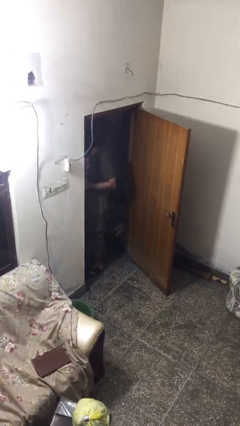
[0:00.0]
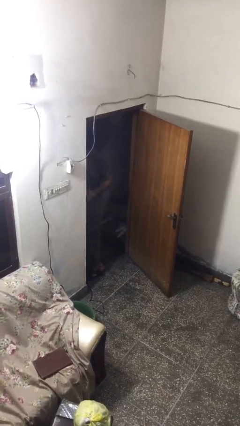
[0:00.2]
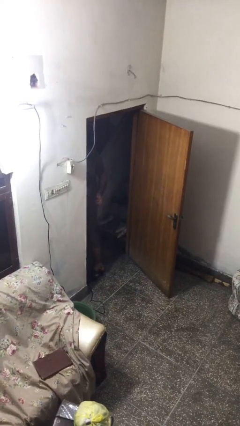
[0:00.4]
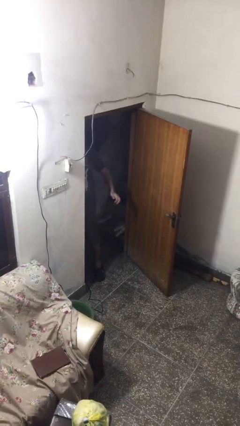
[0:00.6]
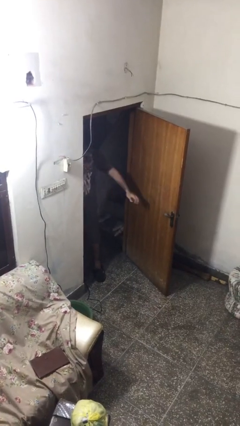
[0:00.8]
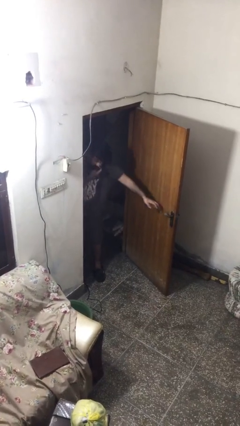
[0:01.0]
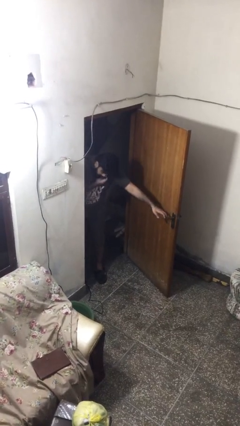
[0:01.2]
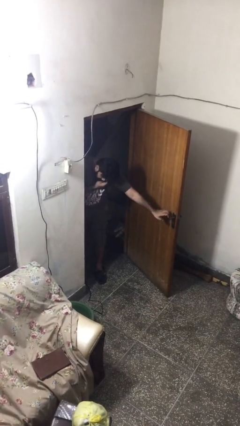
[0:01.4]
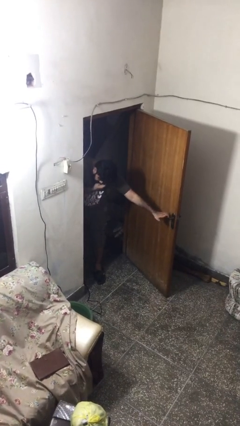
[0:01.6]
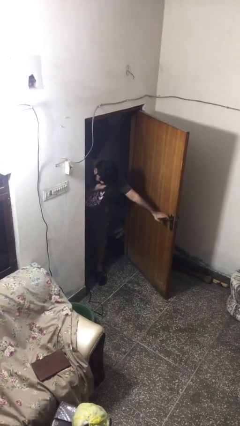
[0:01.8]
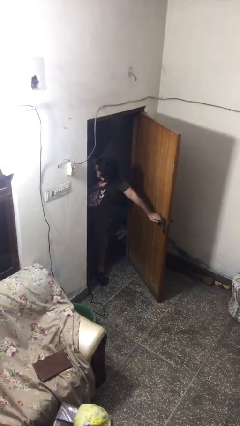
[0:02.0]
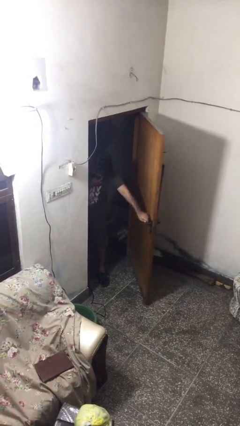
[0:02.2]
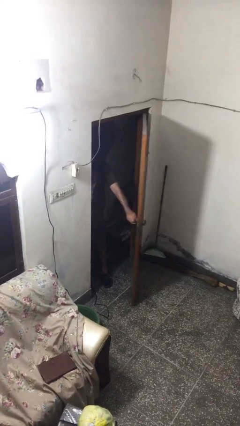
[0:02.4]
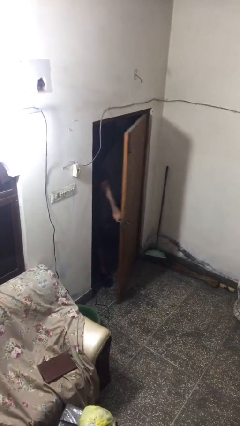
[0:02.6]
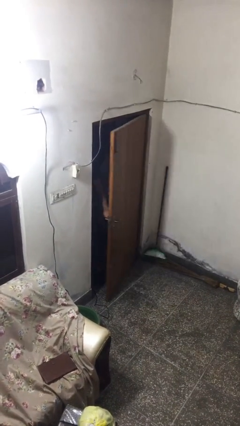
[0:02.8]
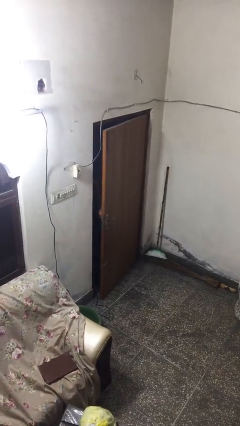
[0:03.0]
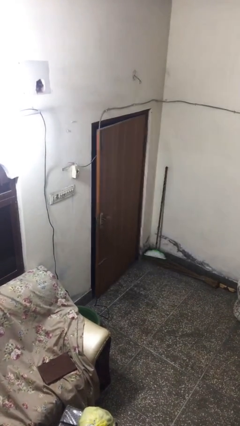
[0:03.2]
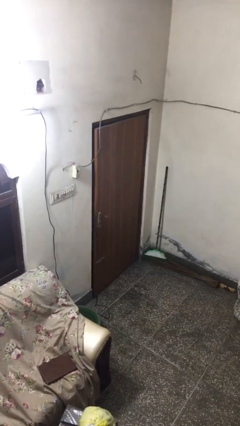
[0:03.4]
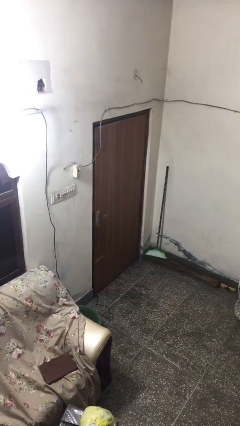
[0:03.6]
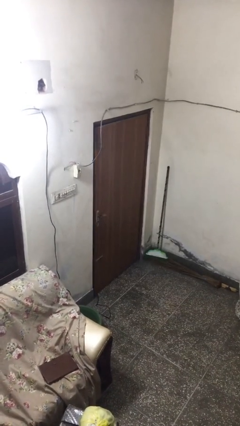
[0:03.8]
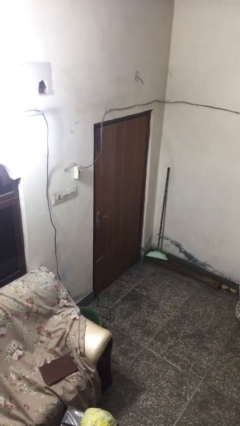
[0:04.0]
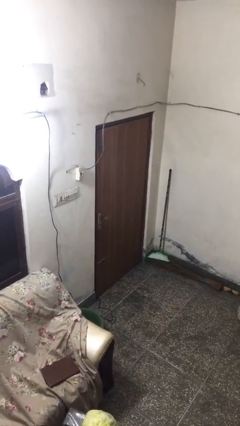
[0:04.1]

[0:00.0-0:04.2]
person closes facility door

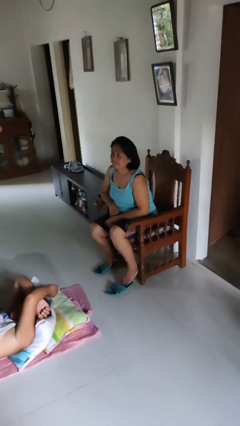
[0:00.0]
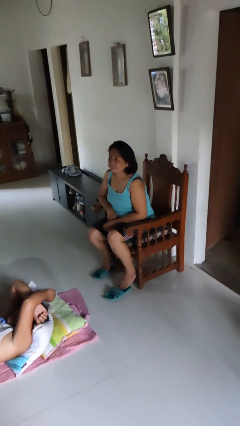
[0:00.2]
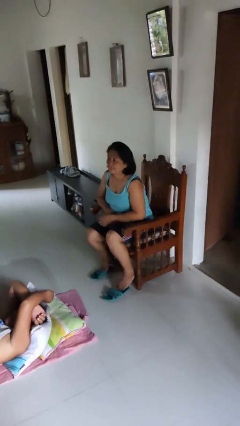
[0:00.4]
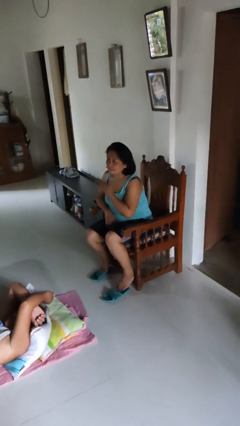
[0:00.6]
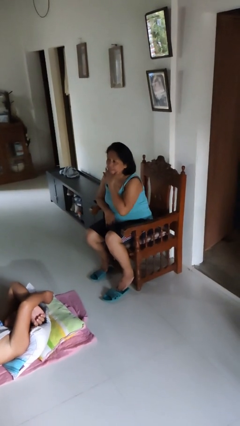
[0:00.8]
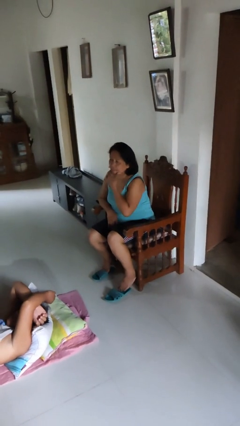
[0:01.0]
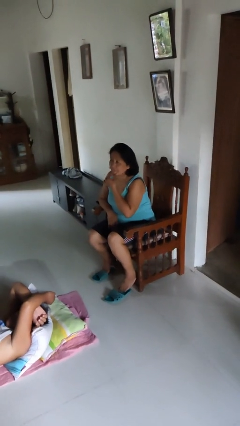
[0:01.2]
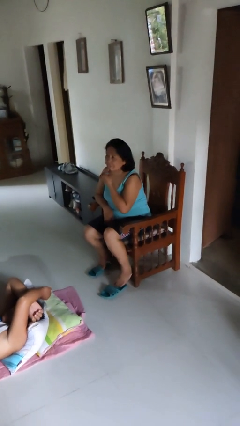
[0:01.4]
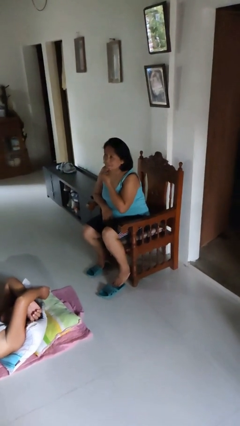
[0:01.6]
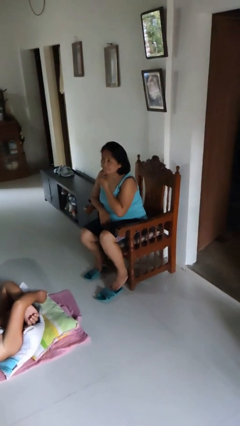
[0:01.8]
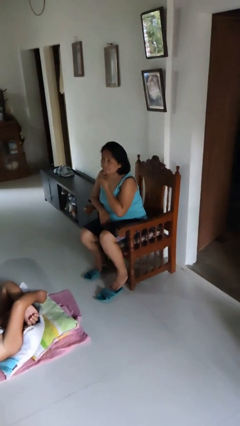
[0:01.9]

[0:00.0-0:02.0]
person strokes chin

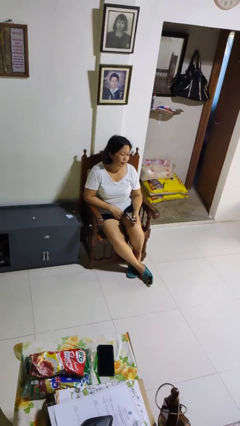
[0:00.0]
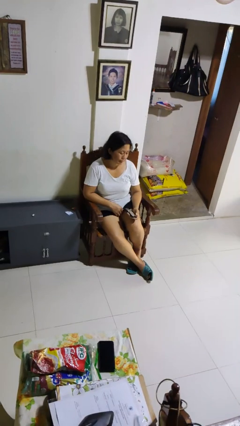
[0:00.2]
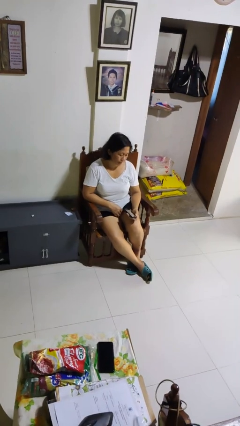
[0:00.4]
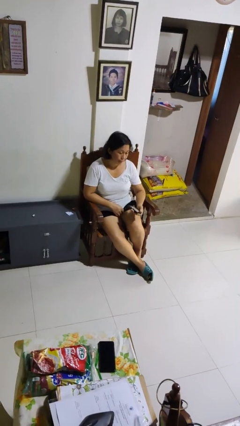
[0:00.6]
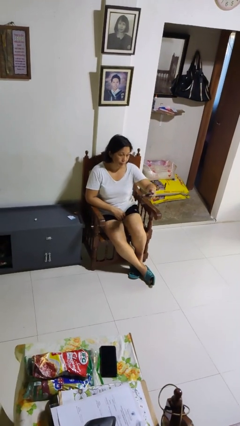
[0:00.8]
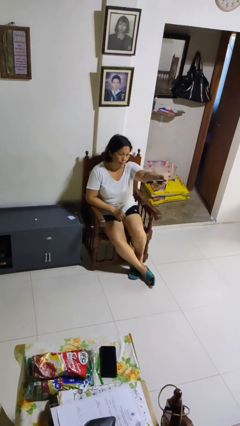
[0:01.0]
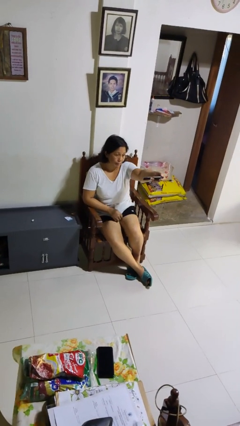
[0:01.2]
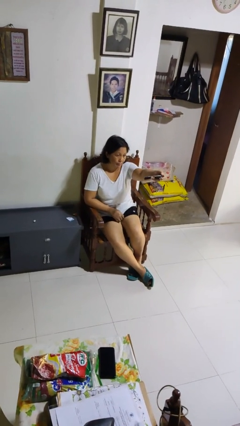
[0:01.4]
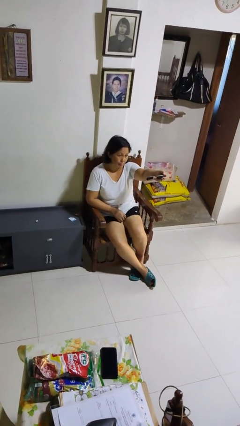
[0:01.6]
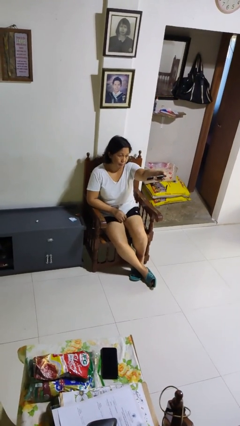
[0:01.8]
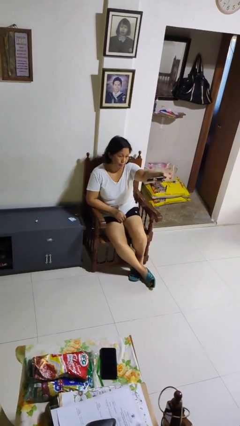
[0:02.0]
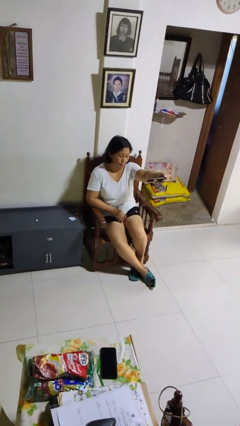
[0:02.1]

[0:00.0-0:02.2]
person uses television remote

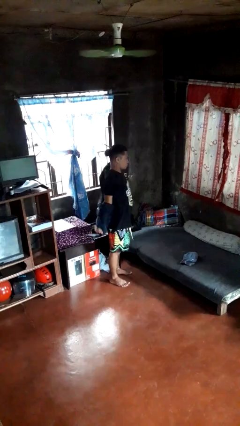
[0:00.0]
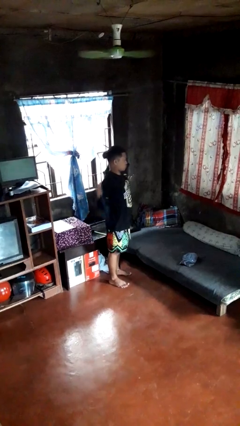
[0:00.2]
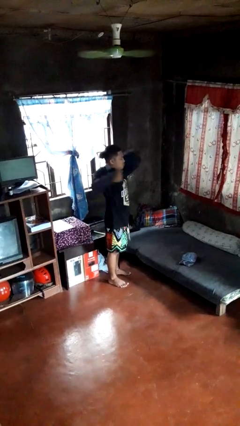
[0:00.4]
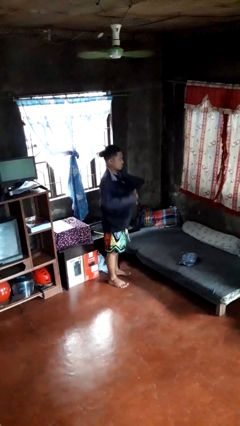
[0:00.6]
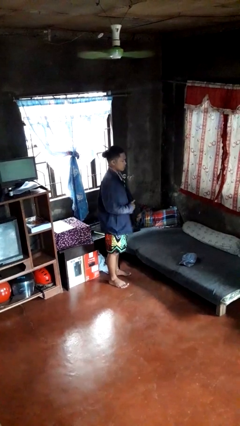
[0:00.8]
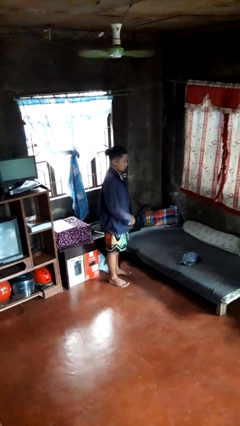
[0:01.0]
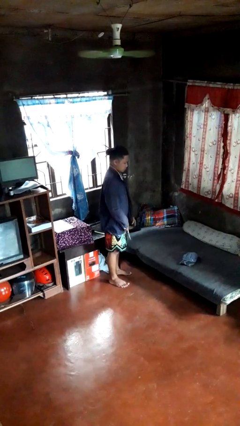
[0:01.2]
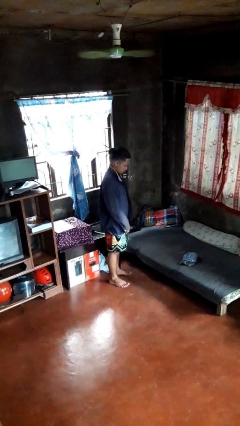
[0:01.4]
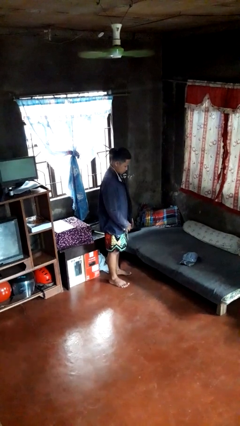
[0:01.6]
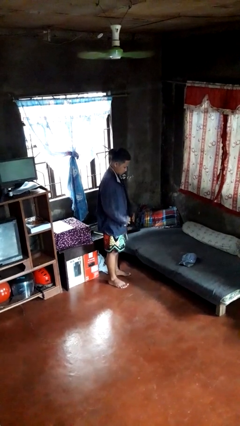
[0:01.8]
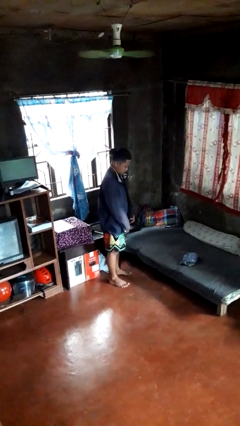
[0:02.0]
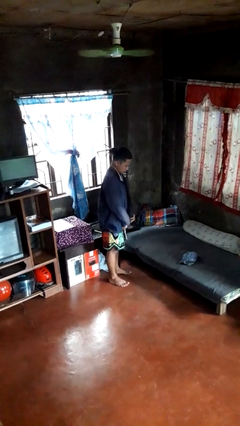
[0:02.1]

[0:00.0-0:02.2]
person puts on jacket

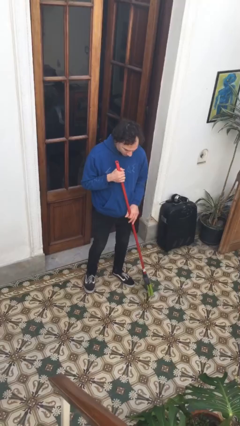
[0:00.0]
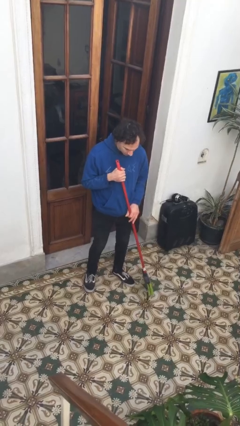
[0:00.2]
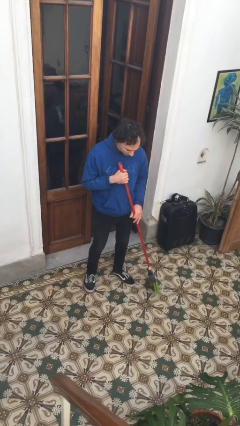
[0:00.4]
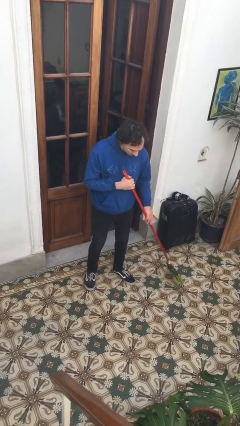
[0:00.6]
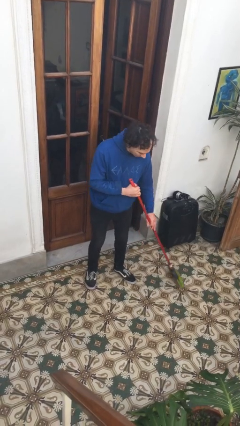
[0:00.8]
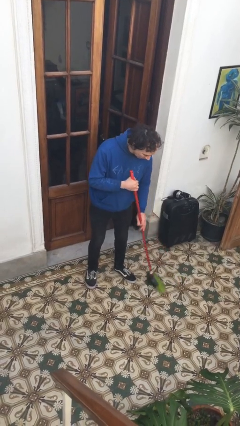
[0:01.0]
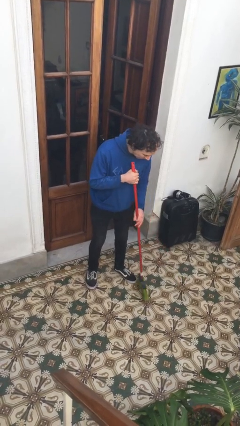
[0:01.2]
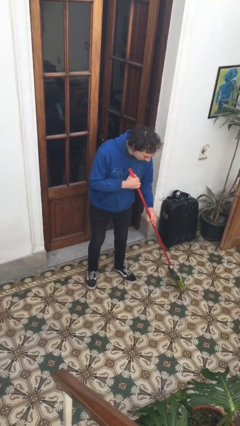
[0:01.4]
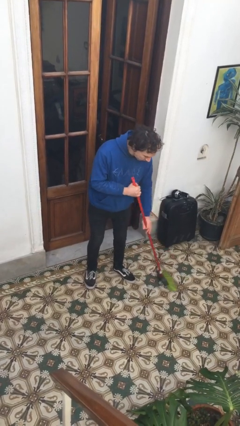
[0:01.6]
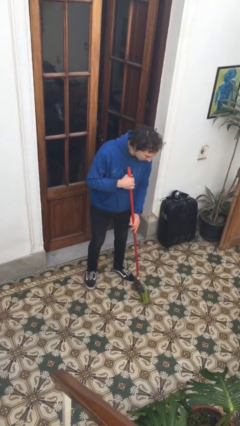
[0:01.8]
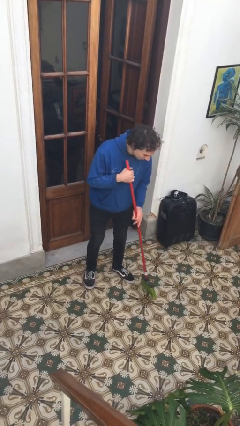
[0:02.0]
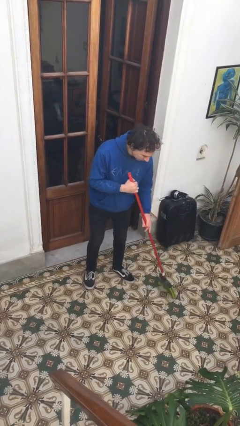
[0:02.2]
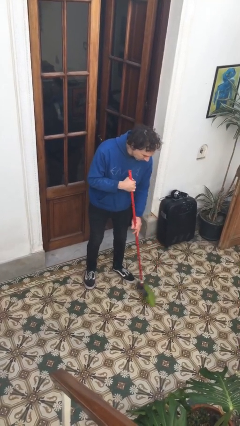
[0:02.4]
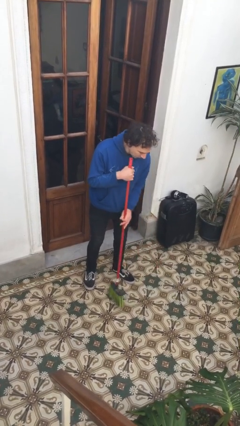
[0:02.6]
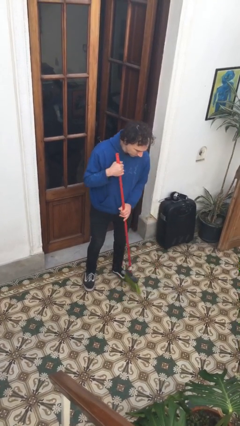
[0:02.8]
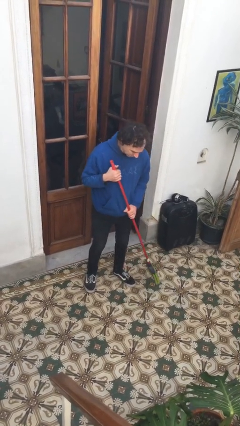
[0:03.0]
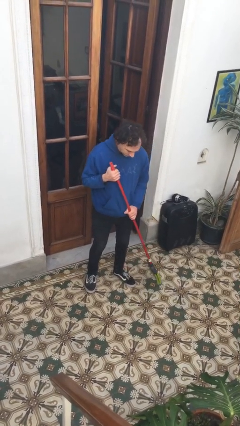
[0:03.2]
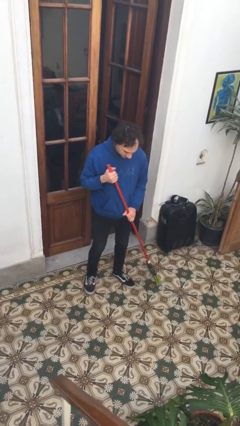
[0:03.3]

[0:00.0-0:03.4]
person sweeps floor

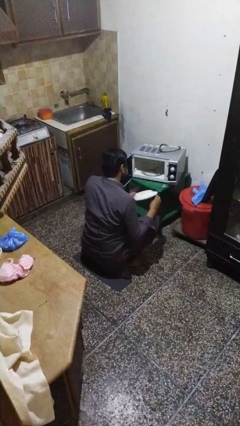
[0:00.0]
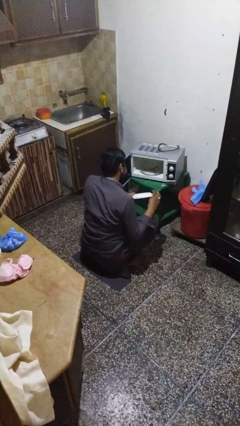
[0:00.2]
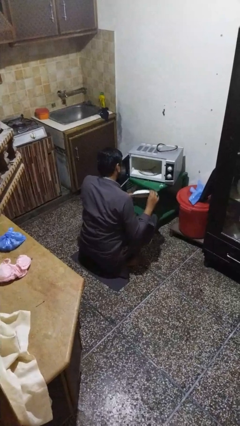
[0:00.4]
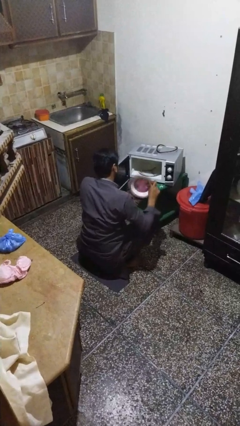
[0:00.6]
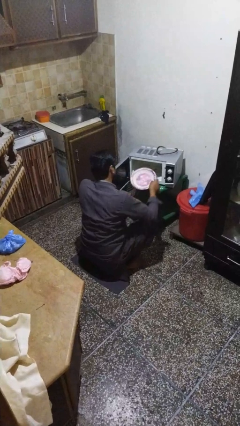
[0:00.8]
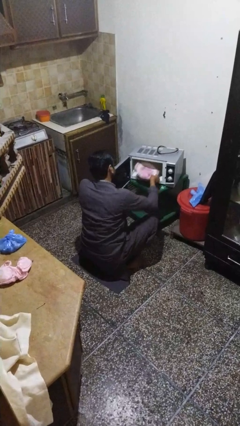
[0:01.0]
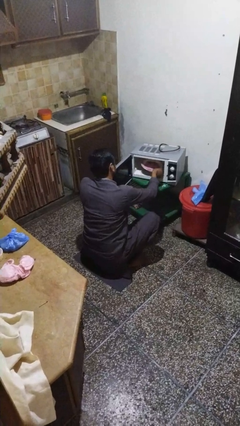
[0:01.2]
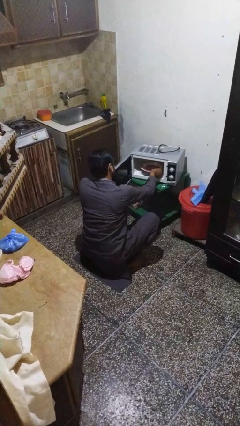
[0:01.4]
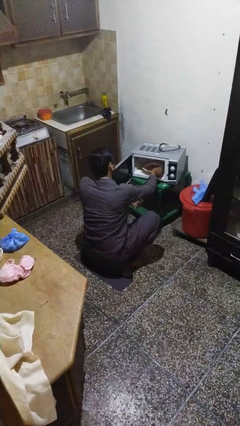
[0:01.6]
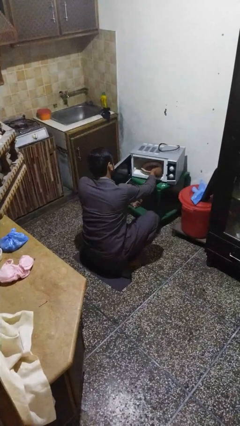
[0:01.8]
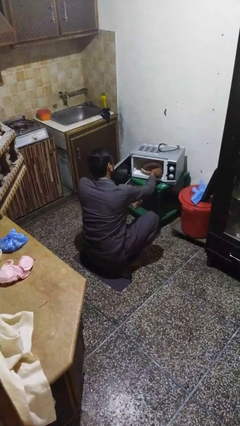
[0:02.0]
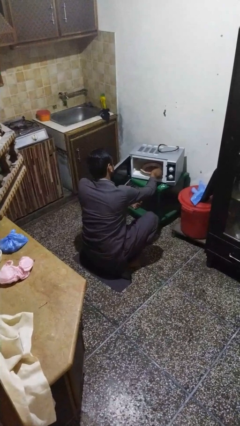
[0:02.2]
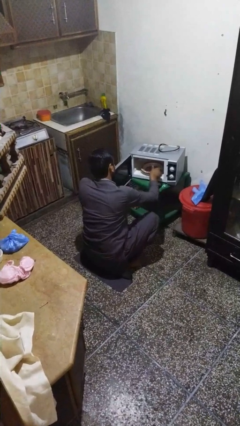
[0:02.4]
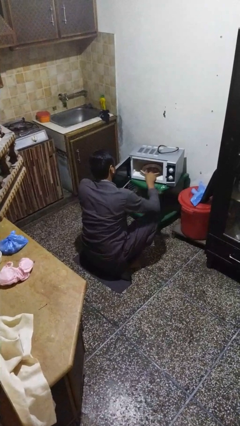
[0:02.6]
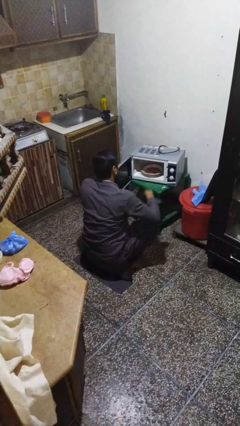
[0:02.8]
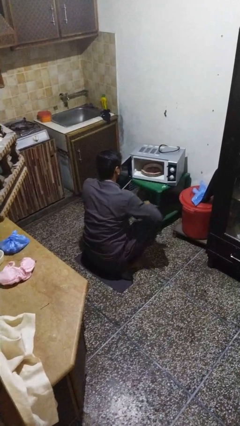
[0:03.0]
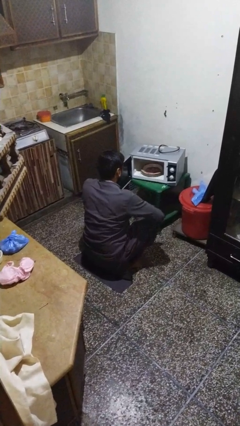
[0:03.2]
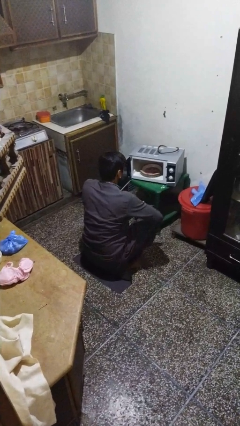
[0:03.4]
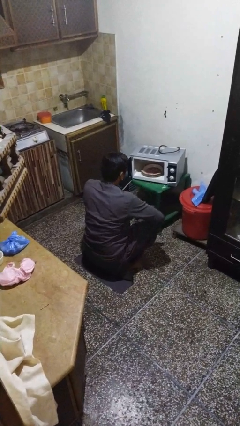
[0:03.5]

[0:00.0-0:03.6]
person puts object into microwave
